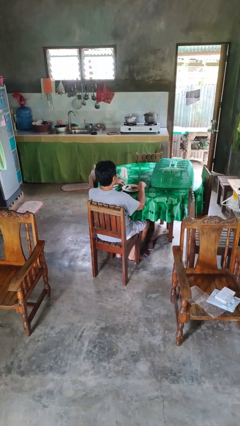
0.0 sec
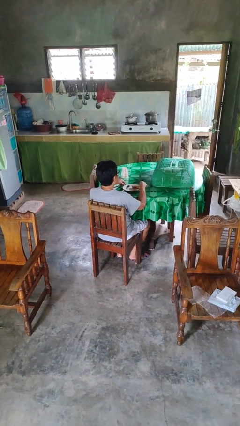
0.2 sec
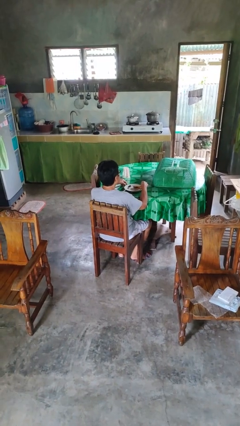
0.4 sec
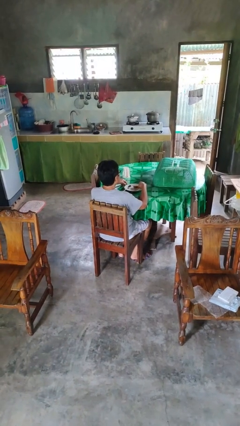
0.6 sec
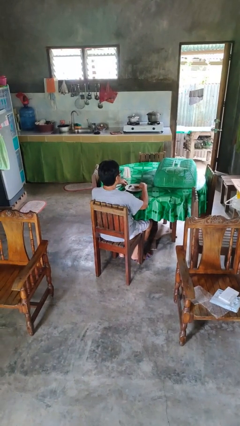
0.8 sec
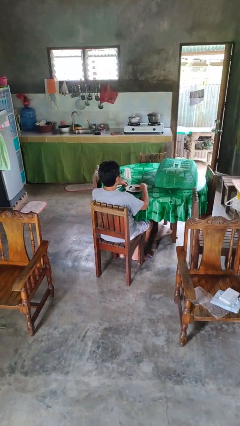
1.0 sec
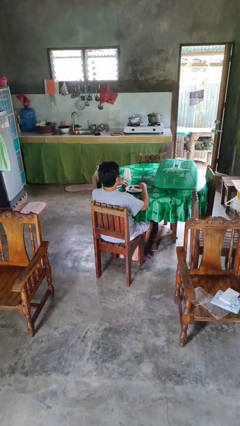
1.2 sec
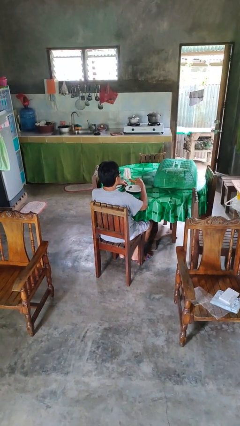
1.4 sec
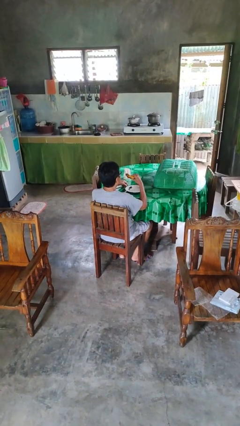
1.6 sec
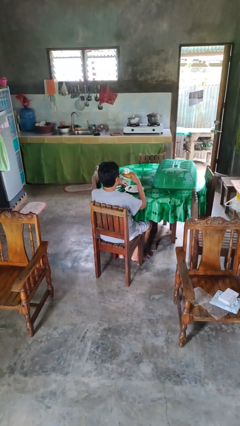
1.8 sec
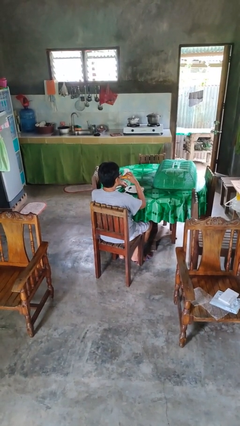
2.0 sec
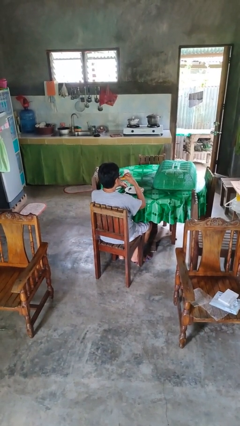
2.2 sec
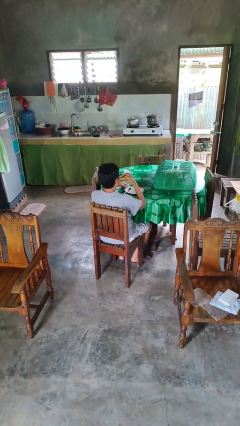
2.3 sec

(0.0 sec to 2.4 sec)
person eats with hands

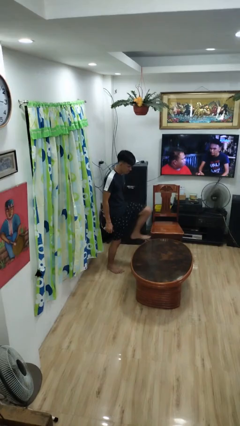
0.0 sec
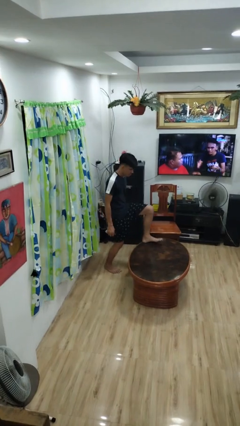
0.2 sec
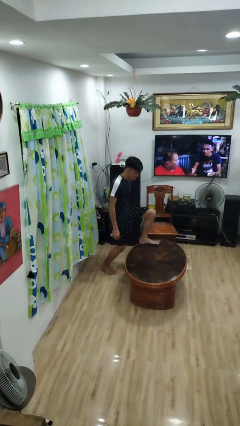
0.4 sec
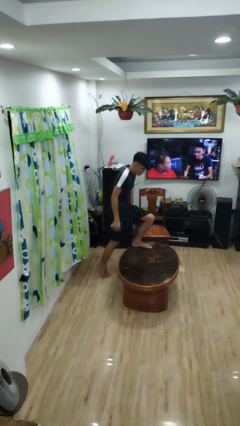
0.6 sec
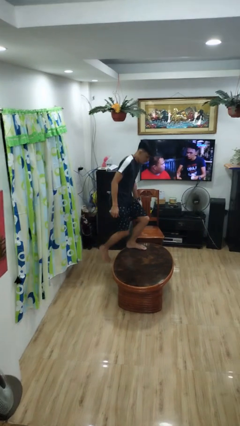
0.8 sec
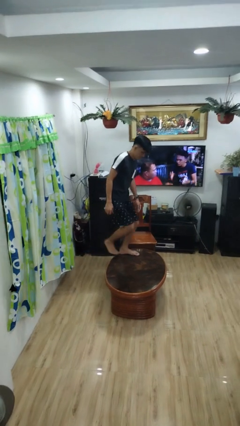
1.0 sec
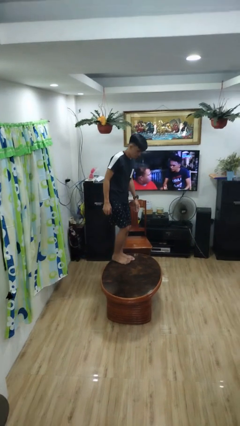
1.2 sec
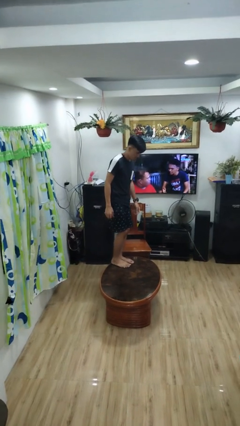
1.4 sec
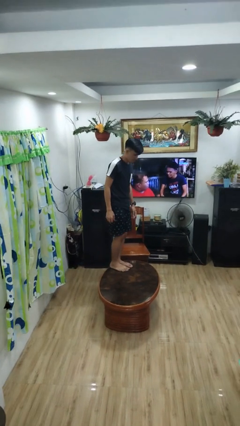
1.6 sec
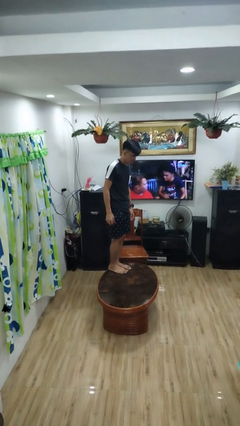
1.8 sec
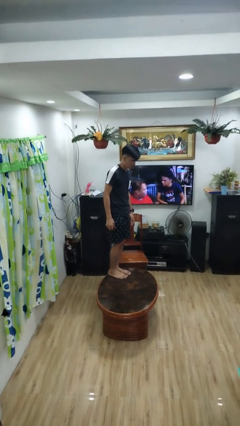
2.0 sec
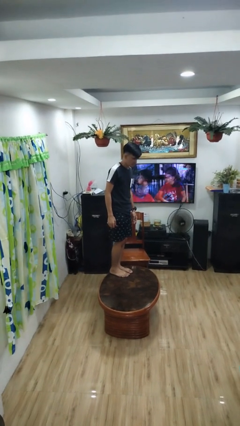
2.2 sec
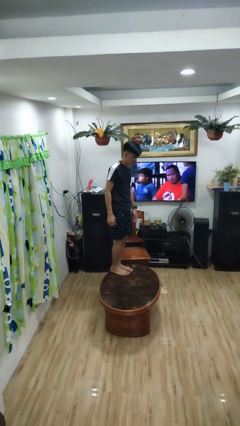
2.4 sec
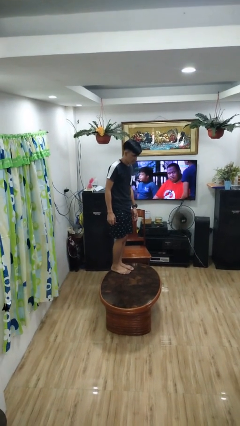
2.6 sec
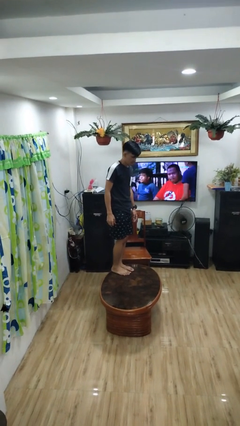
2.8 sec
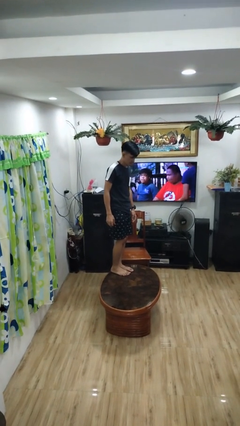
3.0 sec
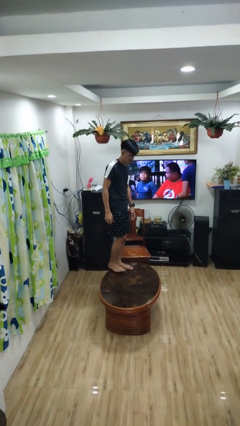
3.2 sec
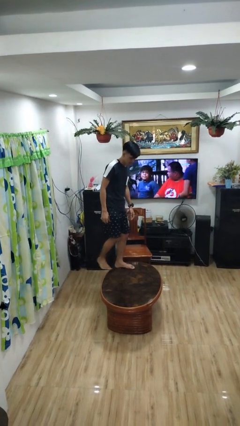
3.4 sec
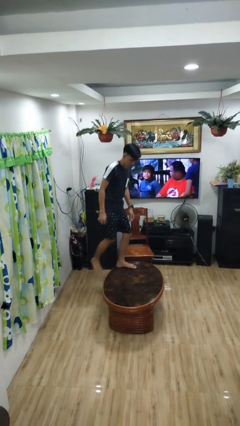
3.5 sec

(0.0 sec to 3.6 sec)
person climbs on table

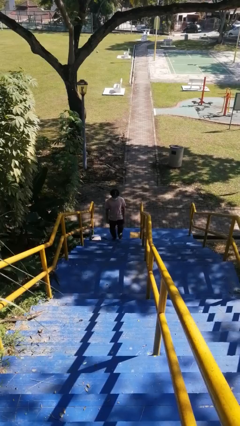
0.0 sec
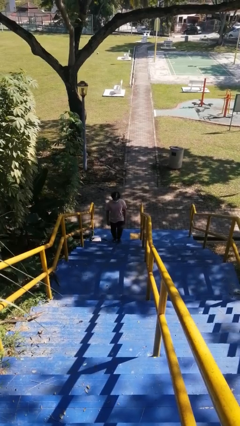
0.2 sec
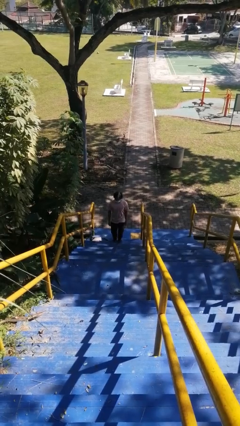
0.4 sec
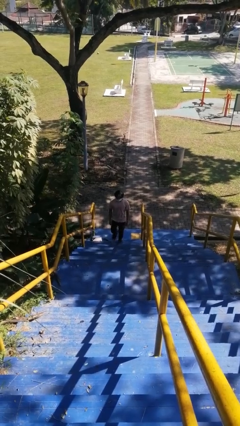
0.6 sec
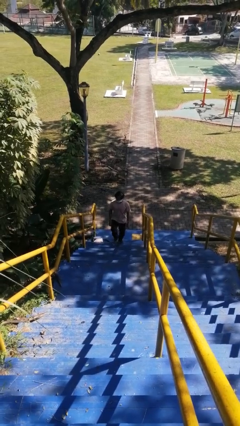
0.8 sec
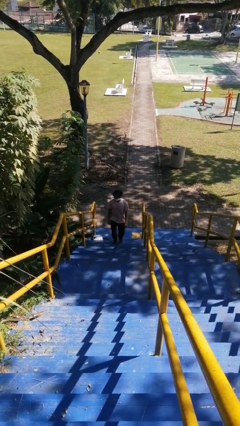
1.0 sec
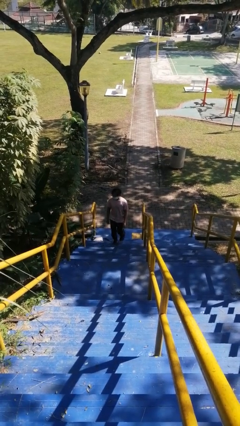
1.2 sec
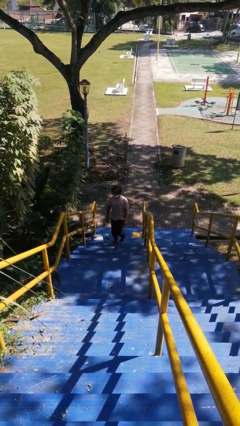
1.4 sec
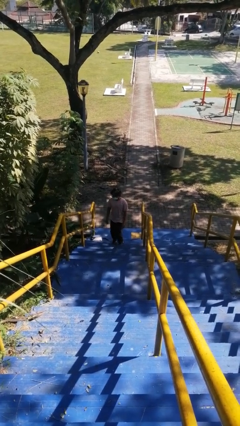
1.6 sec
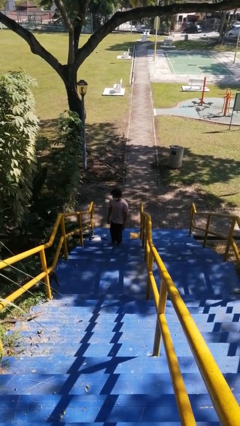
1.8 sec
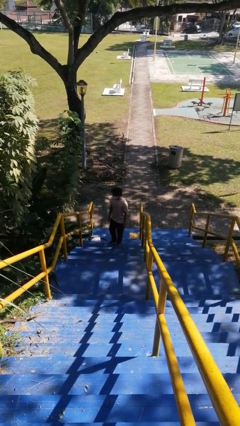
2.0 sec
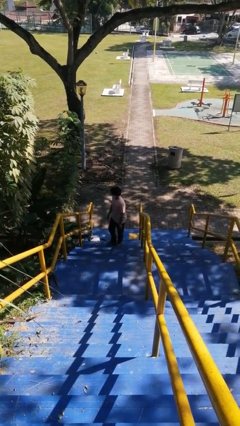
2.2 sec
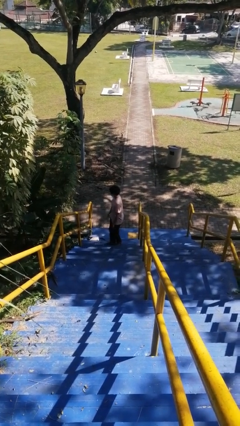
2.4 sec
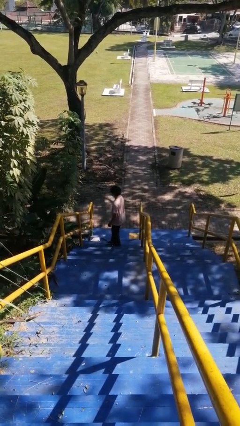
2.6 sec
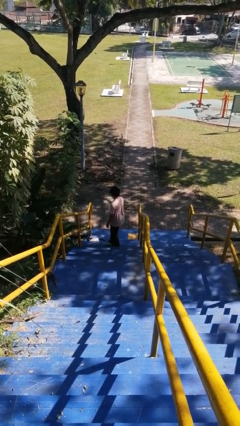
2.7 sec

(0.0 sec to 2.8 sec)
person climbs up stairs

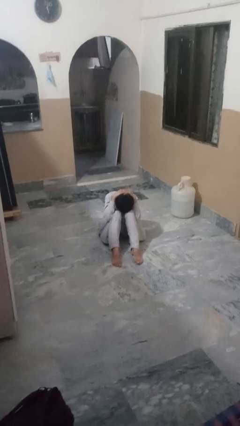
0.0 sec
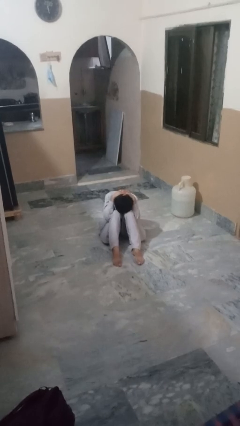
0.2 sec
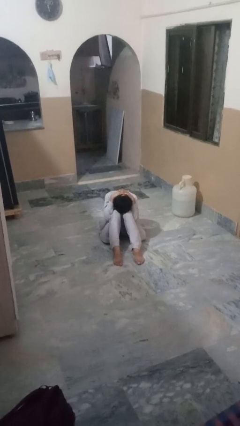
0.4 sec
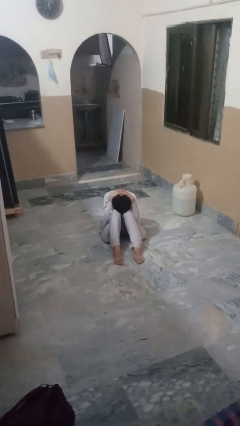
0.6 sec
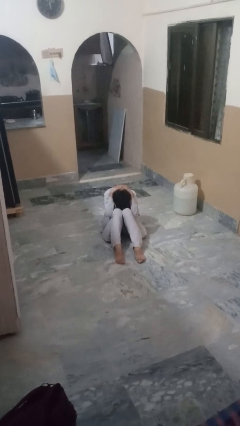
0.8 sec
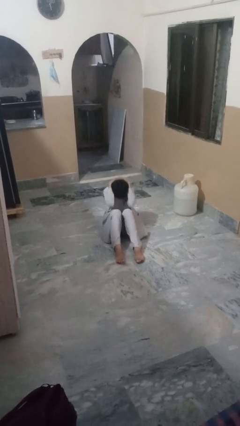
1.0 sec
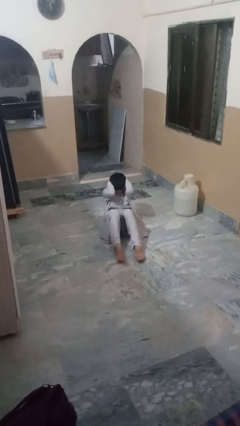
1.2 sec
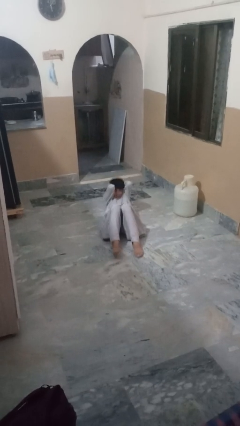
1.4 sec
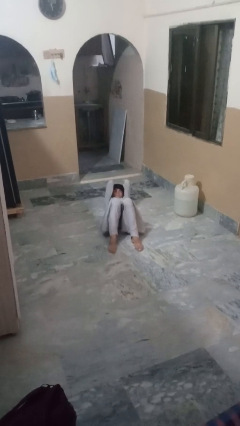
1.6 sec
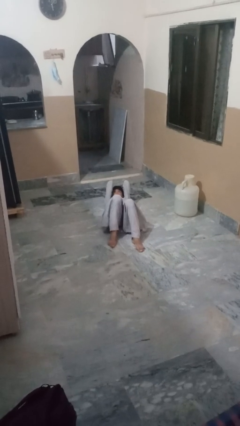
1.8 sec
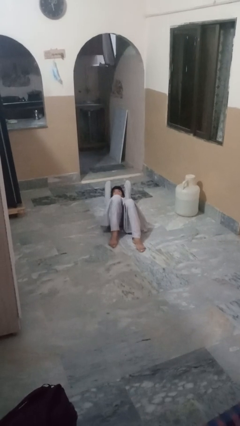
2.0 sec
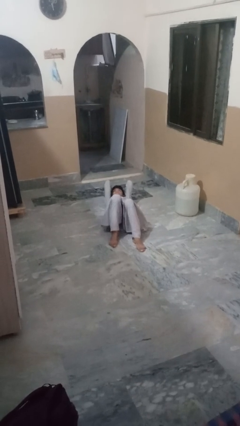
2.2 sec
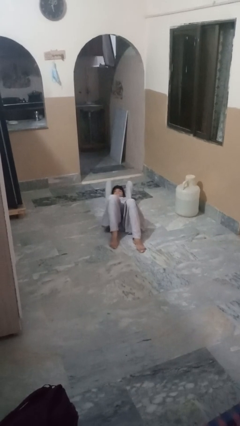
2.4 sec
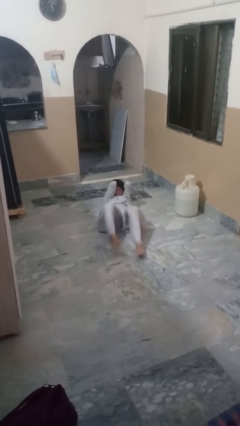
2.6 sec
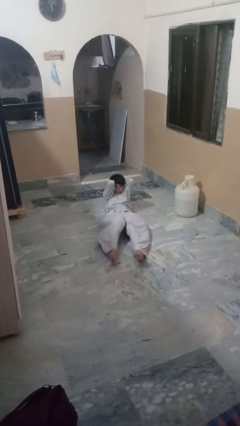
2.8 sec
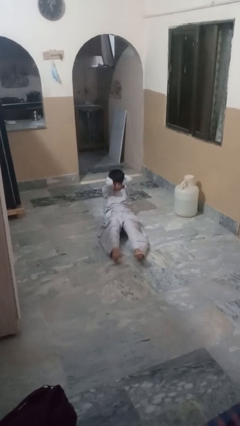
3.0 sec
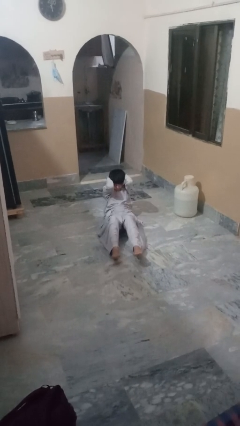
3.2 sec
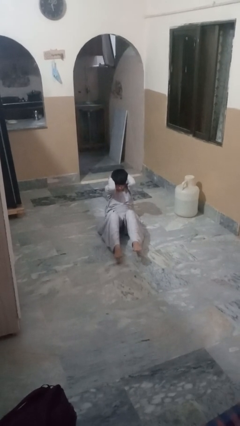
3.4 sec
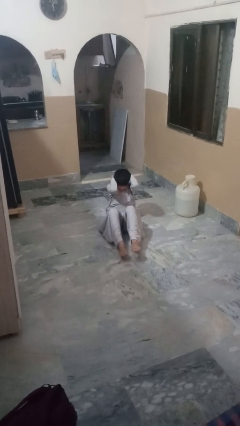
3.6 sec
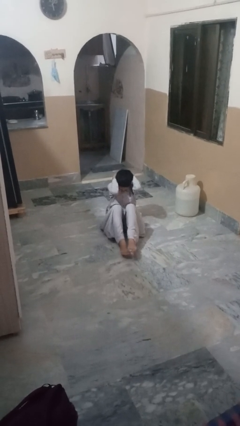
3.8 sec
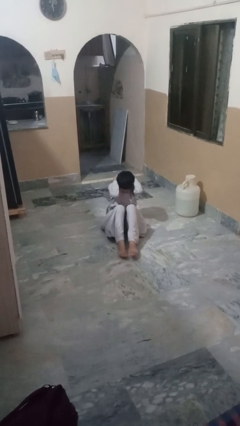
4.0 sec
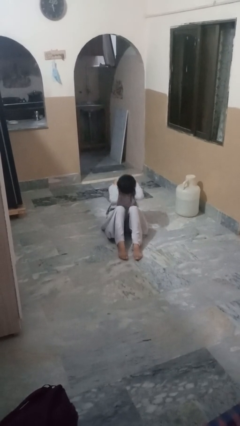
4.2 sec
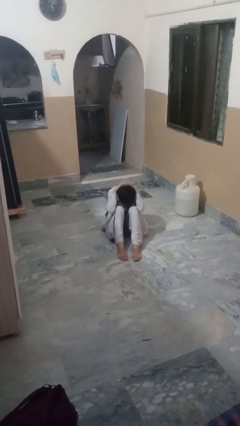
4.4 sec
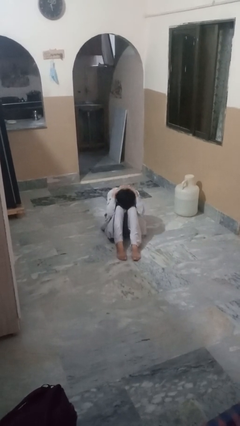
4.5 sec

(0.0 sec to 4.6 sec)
person exercises with situp

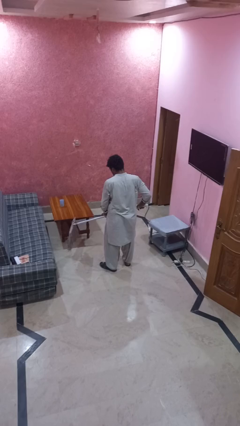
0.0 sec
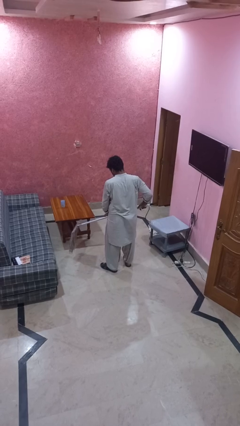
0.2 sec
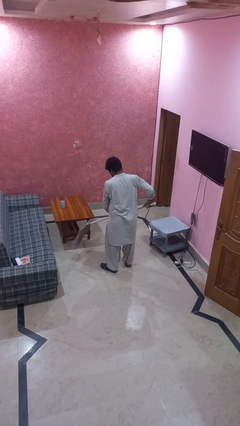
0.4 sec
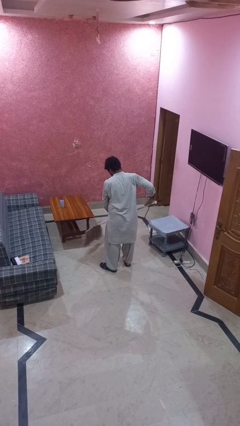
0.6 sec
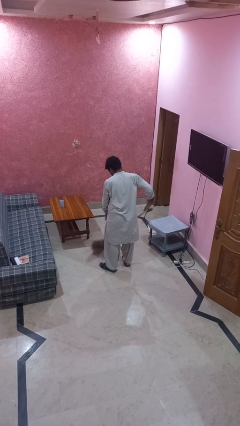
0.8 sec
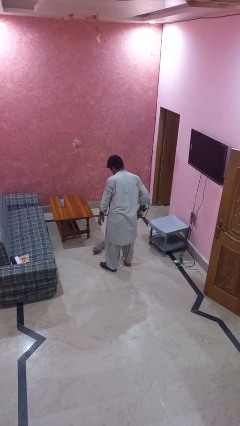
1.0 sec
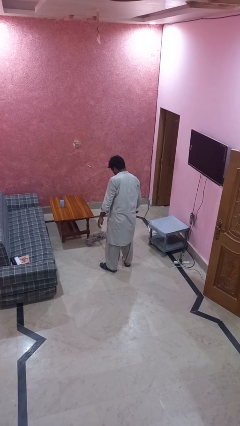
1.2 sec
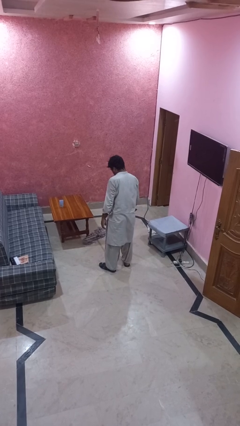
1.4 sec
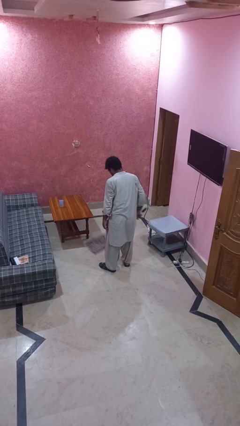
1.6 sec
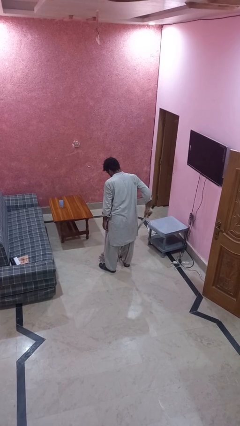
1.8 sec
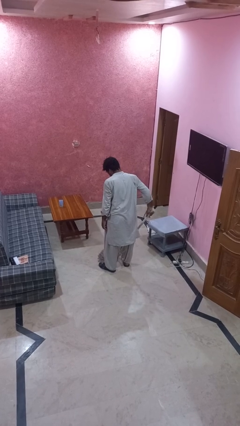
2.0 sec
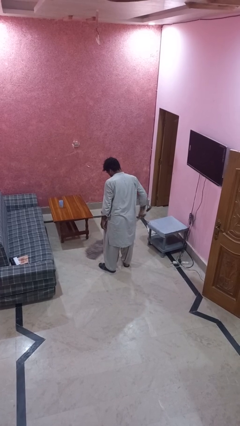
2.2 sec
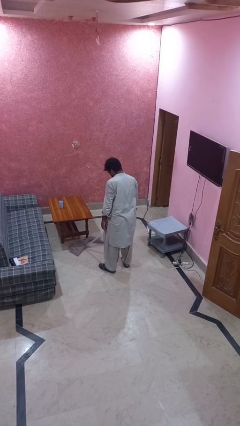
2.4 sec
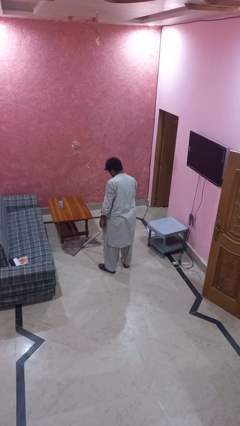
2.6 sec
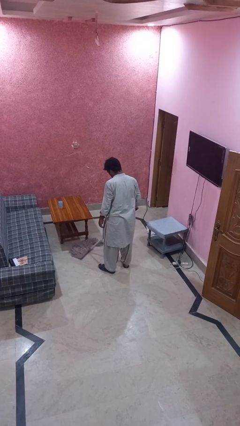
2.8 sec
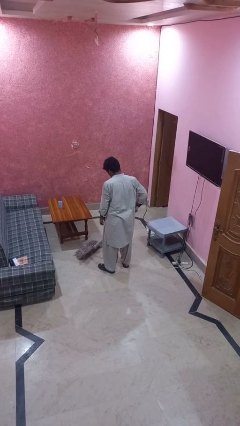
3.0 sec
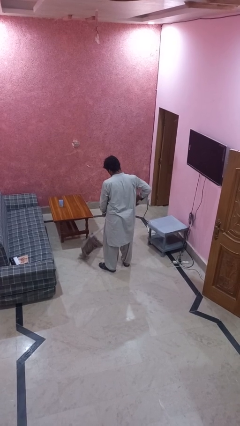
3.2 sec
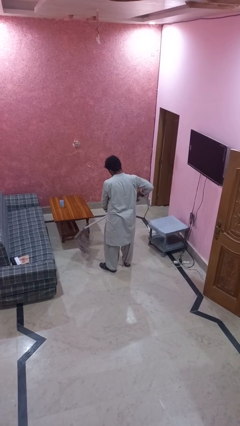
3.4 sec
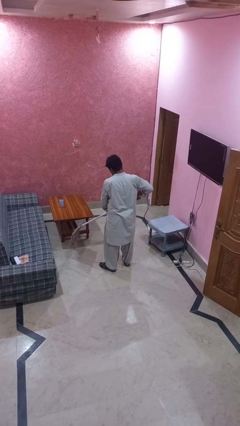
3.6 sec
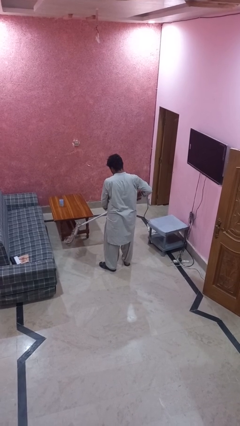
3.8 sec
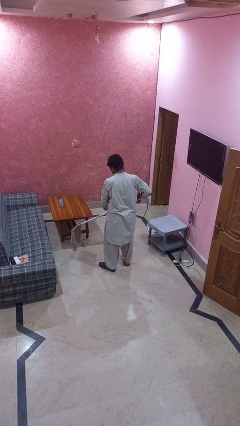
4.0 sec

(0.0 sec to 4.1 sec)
person mops

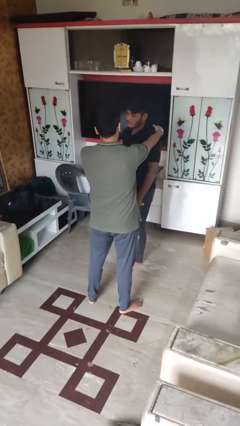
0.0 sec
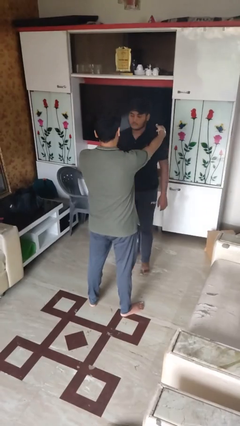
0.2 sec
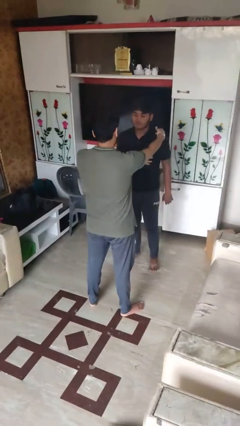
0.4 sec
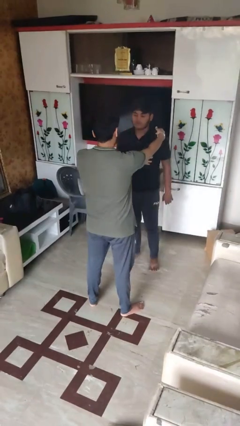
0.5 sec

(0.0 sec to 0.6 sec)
person spins person around
